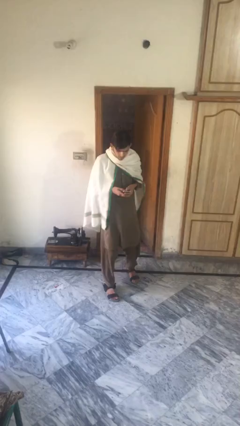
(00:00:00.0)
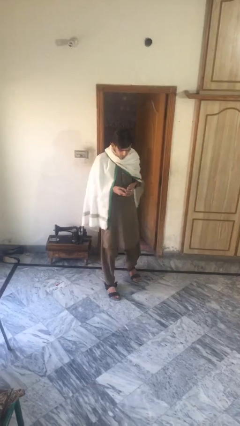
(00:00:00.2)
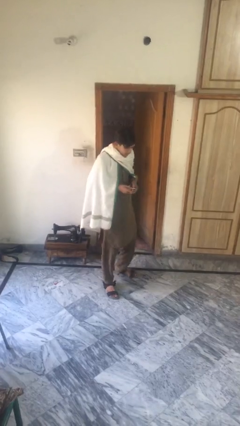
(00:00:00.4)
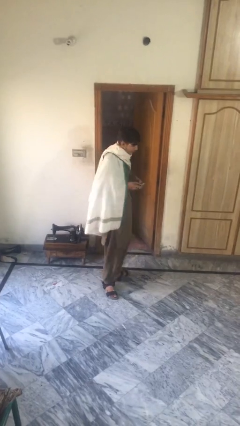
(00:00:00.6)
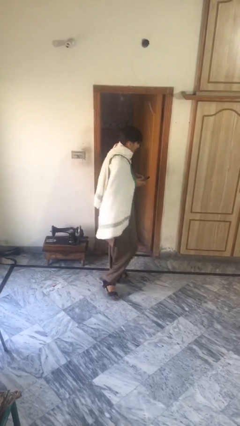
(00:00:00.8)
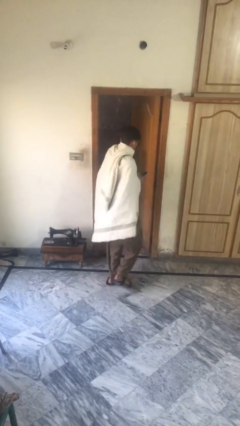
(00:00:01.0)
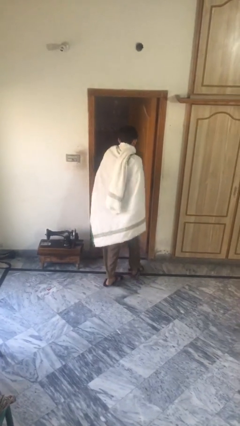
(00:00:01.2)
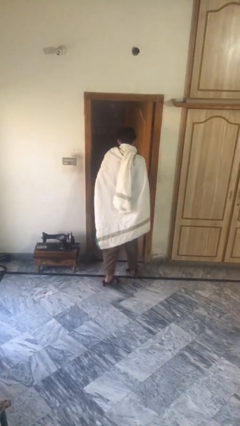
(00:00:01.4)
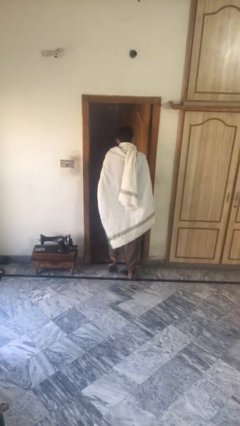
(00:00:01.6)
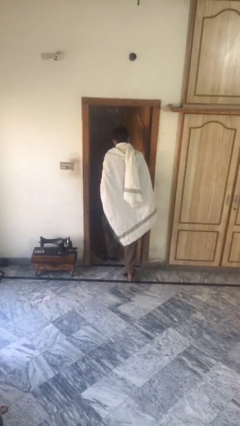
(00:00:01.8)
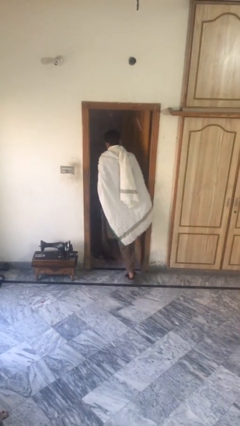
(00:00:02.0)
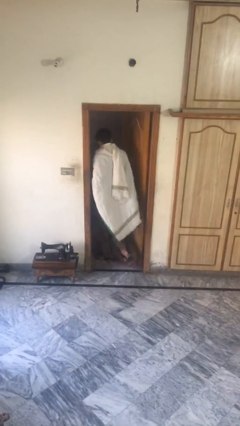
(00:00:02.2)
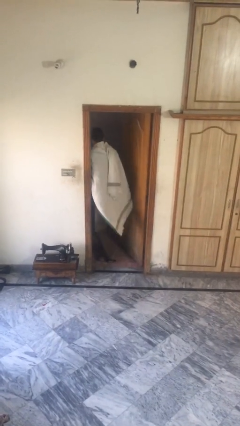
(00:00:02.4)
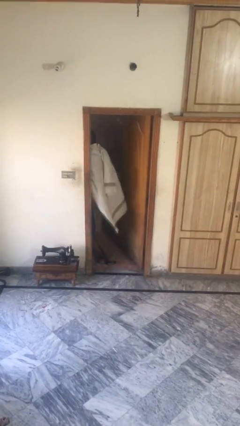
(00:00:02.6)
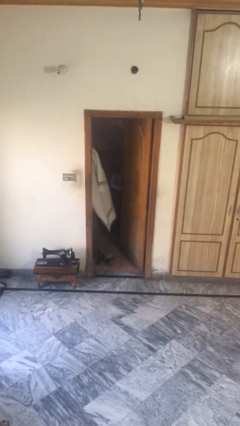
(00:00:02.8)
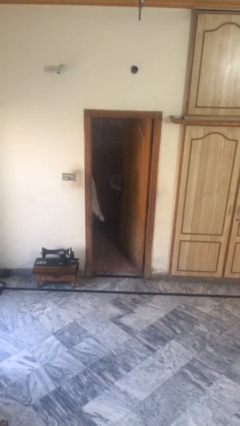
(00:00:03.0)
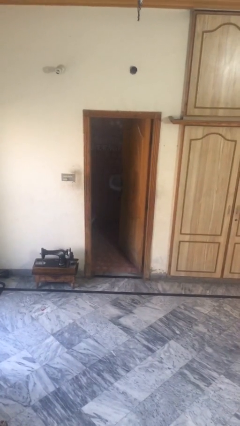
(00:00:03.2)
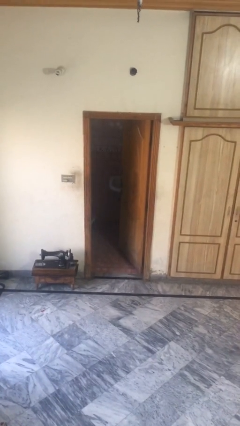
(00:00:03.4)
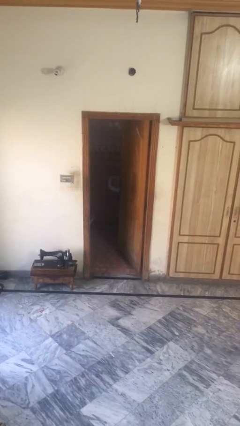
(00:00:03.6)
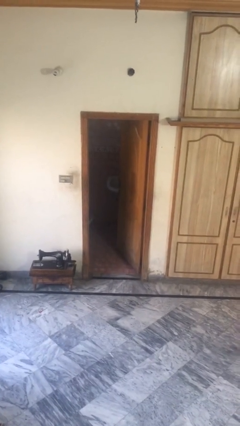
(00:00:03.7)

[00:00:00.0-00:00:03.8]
person exits scene through structure

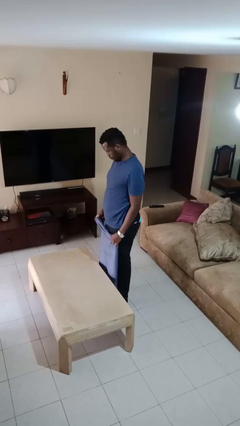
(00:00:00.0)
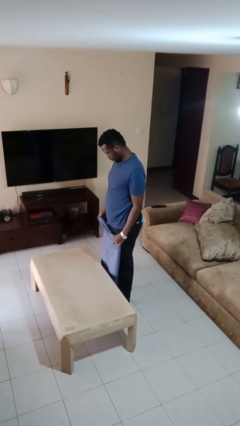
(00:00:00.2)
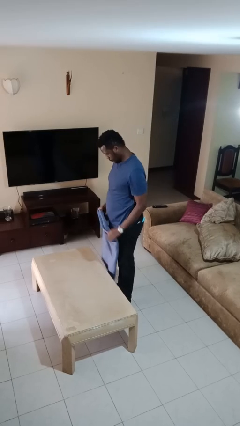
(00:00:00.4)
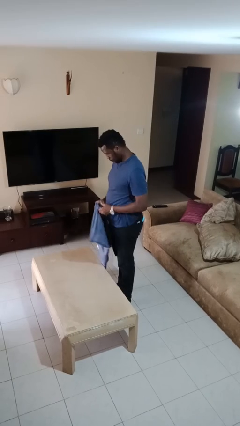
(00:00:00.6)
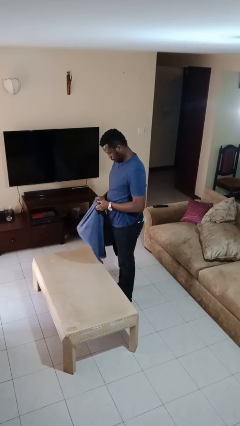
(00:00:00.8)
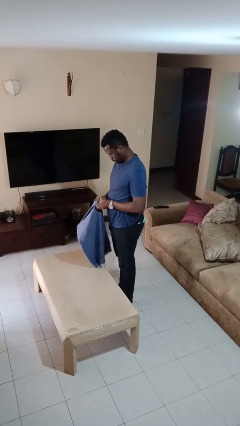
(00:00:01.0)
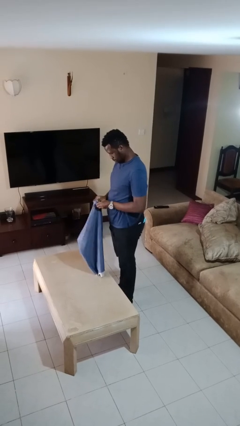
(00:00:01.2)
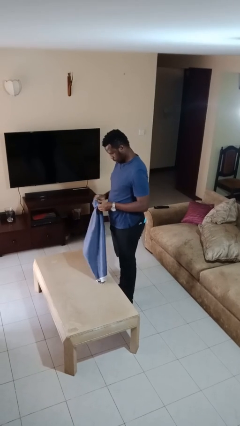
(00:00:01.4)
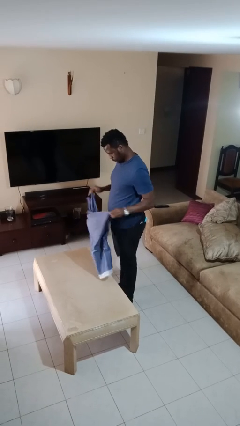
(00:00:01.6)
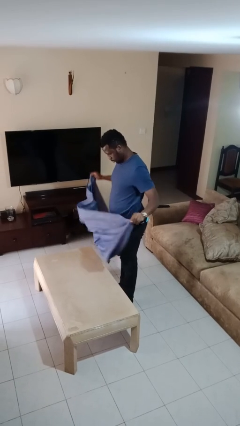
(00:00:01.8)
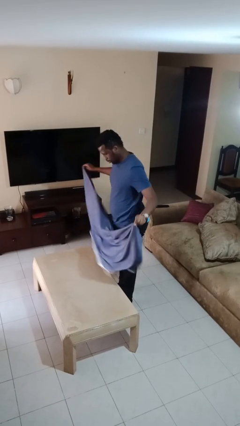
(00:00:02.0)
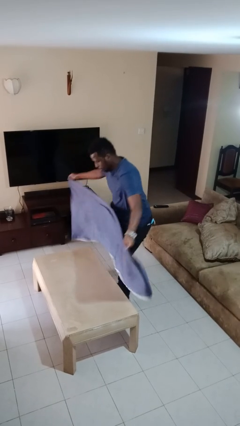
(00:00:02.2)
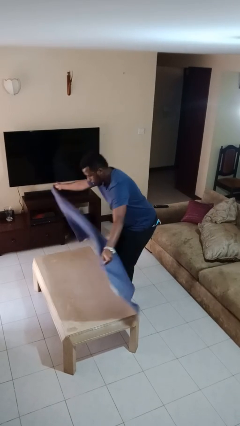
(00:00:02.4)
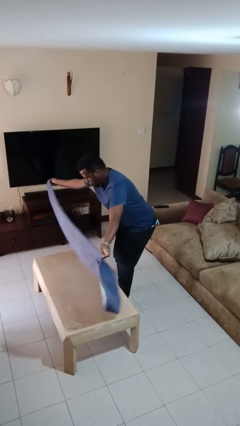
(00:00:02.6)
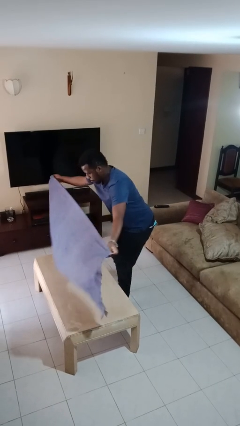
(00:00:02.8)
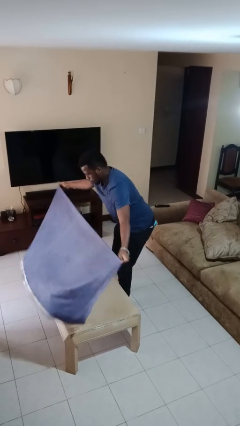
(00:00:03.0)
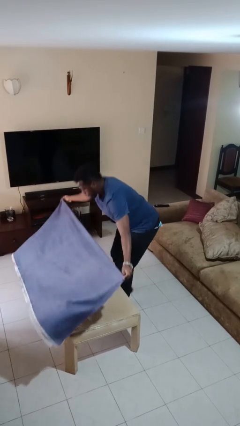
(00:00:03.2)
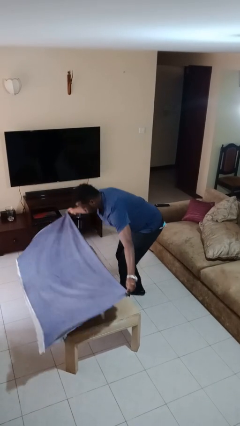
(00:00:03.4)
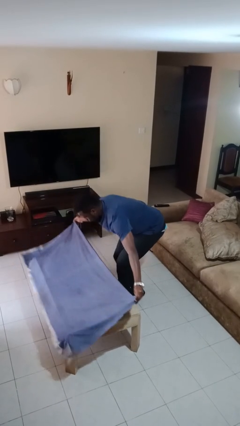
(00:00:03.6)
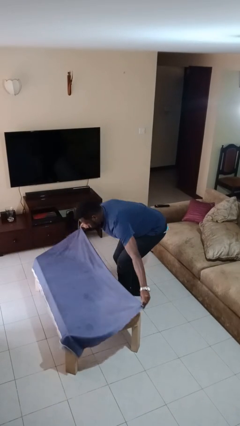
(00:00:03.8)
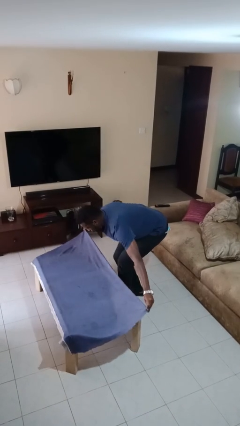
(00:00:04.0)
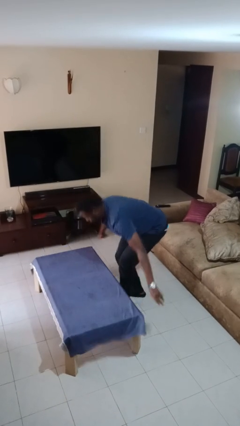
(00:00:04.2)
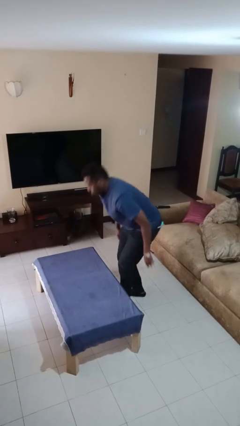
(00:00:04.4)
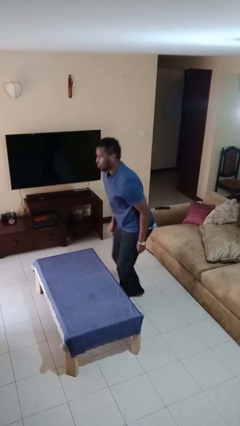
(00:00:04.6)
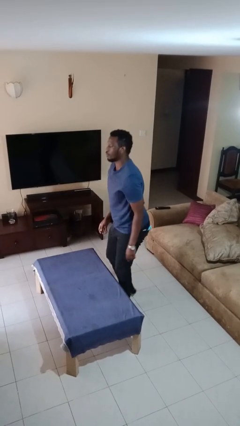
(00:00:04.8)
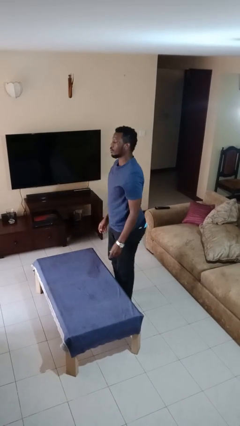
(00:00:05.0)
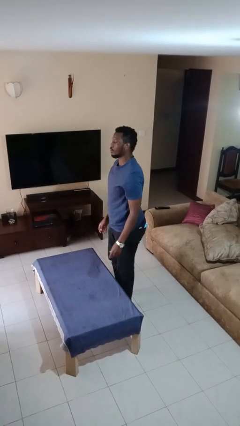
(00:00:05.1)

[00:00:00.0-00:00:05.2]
person spreads tablecloth

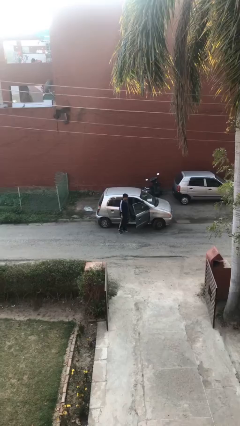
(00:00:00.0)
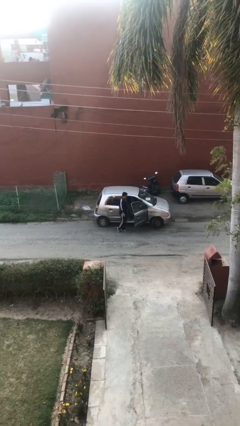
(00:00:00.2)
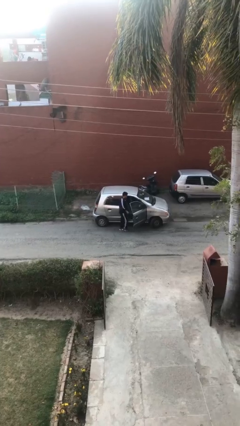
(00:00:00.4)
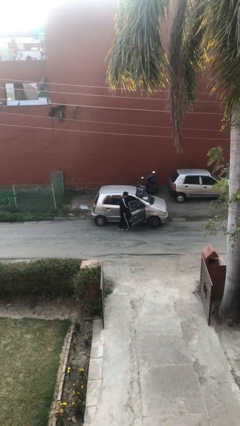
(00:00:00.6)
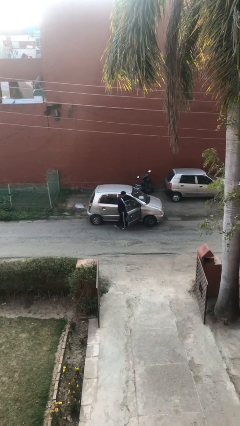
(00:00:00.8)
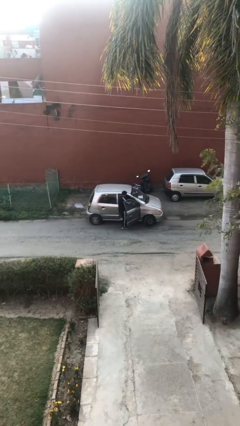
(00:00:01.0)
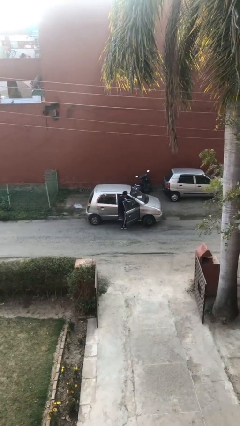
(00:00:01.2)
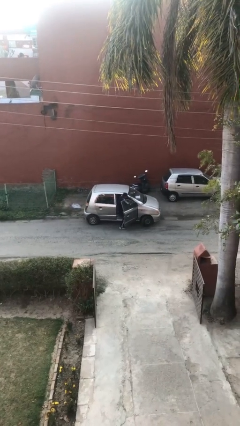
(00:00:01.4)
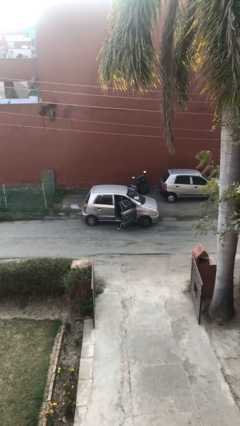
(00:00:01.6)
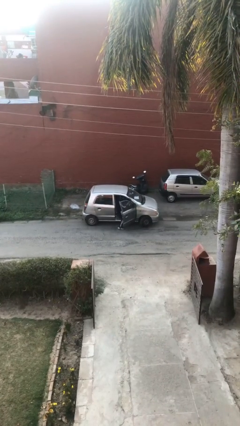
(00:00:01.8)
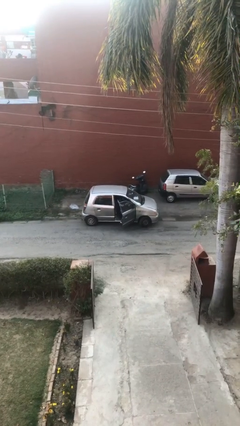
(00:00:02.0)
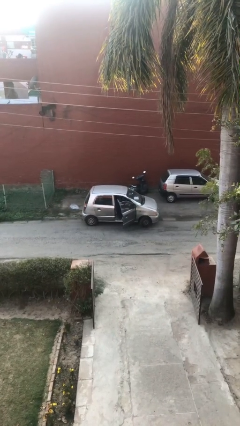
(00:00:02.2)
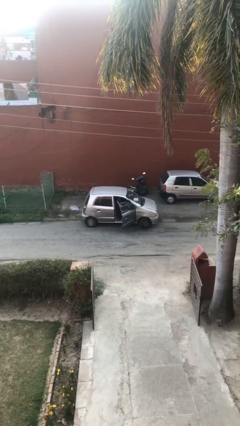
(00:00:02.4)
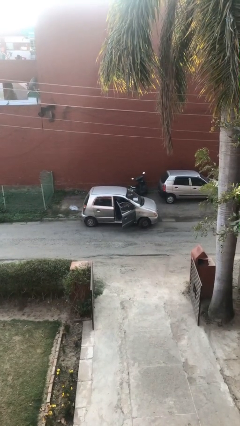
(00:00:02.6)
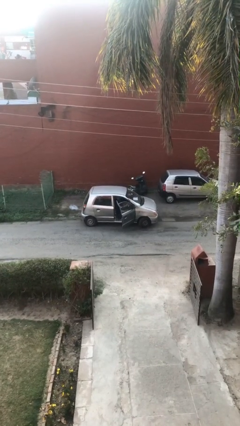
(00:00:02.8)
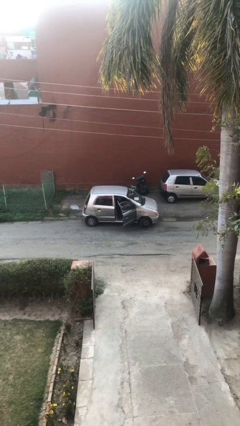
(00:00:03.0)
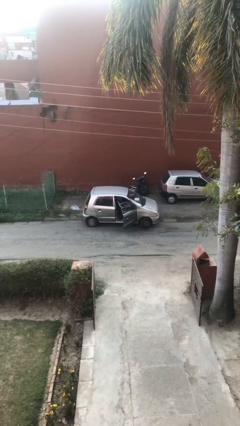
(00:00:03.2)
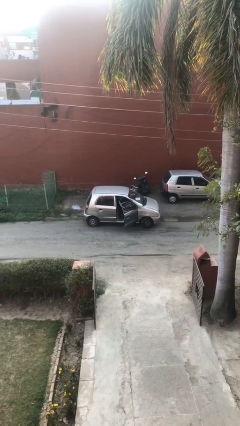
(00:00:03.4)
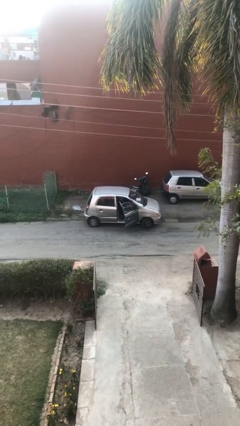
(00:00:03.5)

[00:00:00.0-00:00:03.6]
person enters car

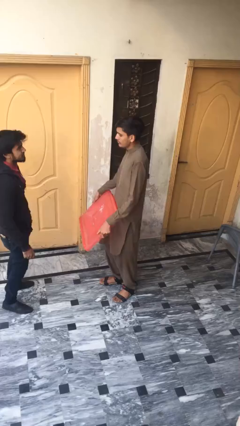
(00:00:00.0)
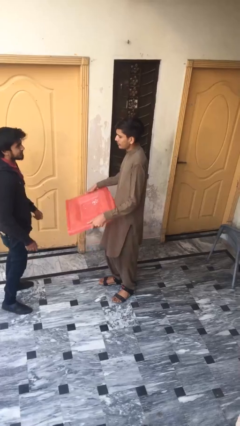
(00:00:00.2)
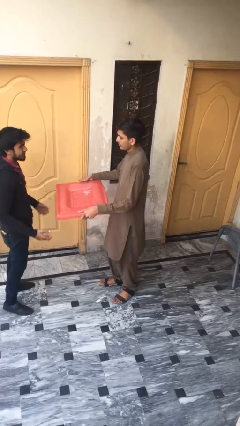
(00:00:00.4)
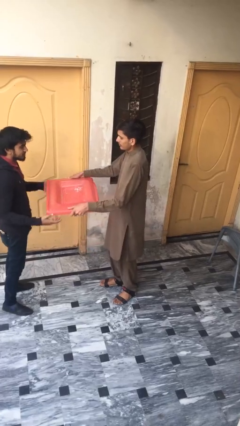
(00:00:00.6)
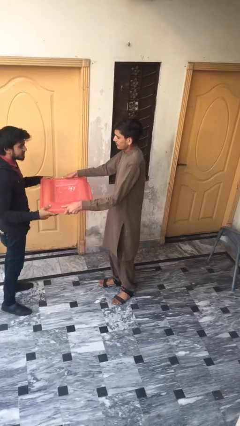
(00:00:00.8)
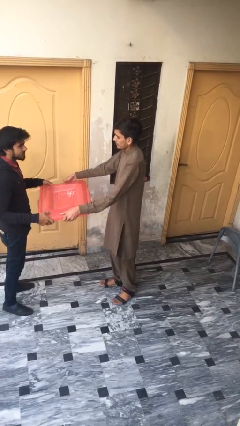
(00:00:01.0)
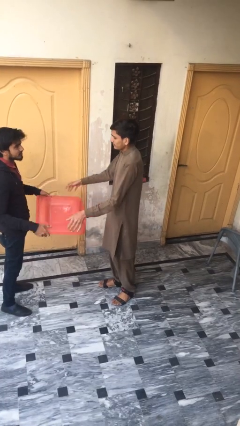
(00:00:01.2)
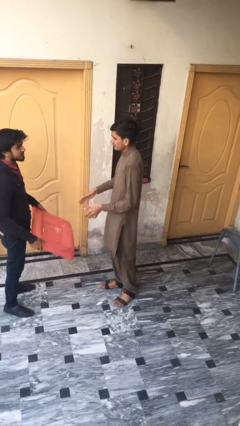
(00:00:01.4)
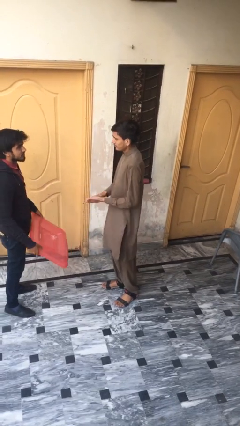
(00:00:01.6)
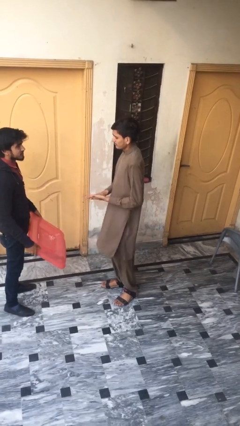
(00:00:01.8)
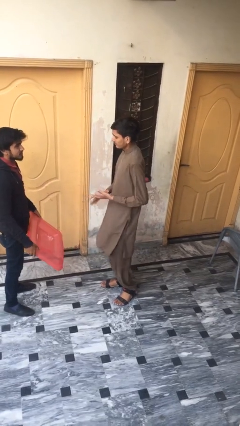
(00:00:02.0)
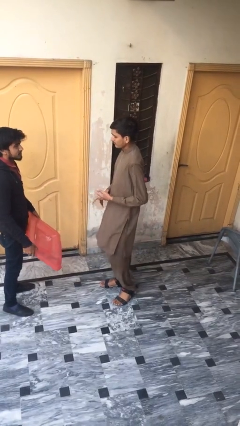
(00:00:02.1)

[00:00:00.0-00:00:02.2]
person transfers object to person

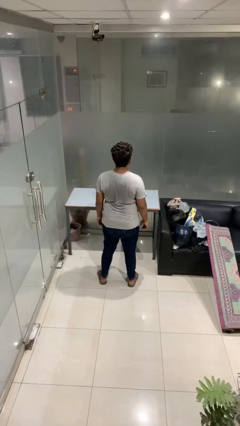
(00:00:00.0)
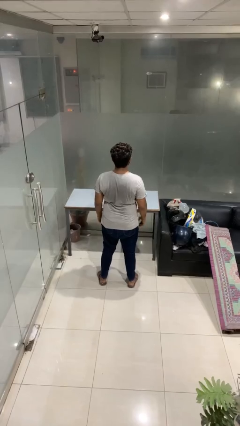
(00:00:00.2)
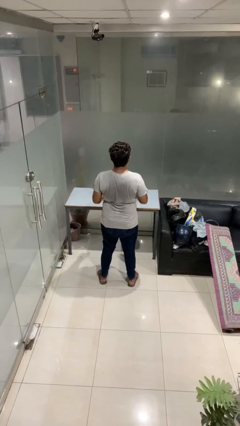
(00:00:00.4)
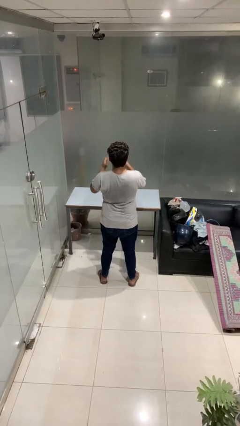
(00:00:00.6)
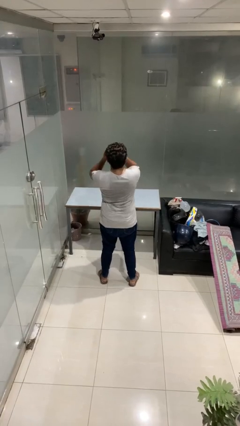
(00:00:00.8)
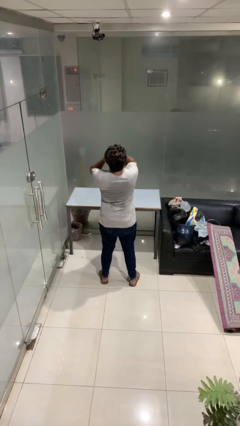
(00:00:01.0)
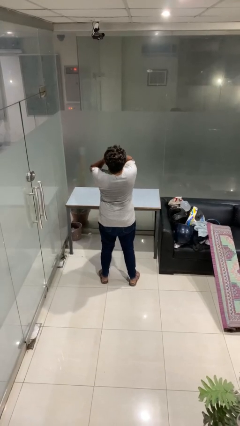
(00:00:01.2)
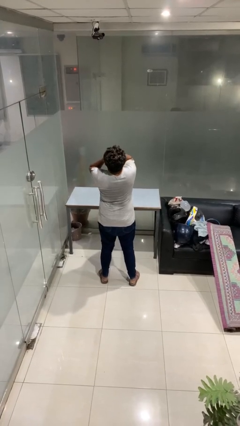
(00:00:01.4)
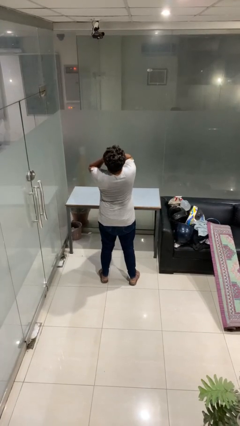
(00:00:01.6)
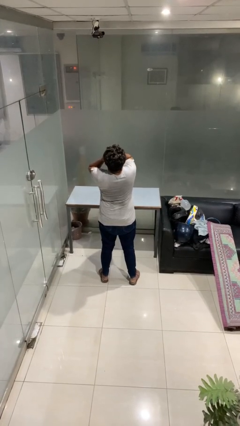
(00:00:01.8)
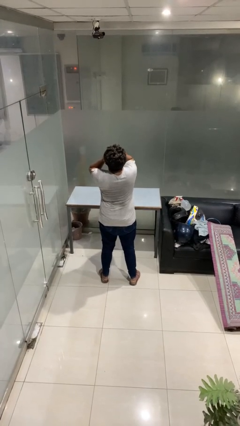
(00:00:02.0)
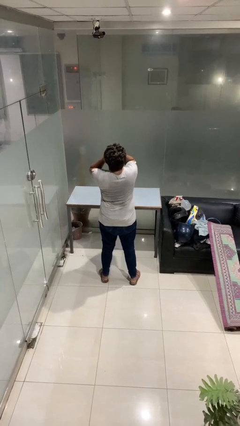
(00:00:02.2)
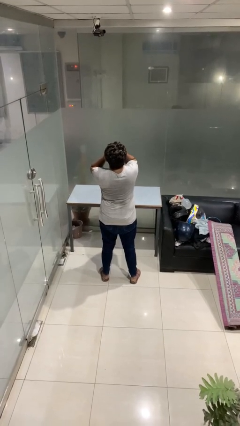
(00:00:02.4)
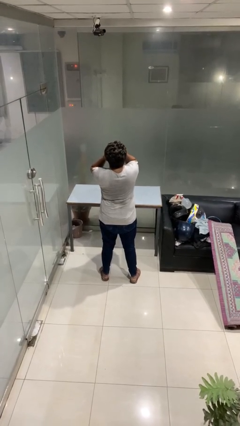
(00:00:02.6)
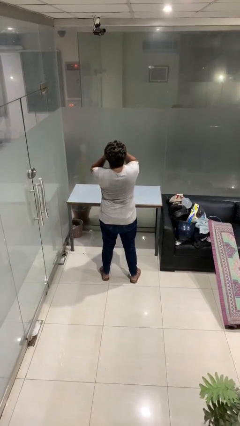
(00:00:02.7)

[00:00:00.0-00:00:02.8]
person covers face with hands
